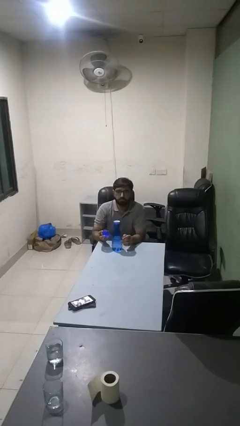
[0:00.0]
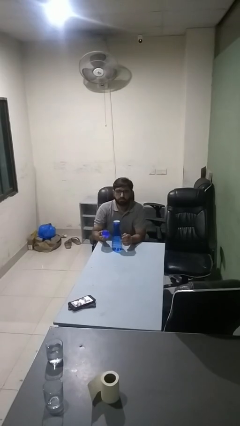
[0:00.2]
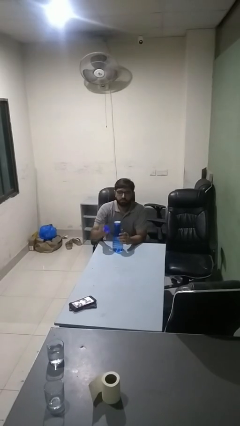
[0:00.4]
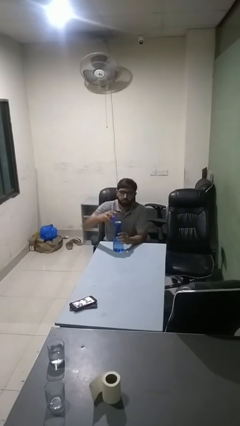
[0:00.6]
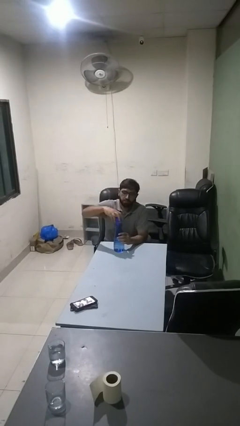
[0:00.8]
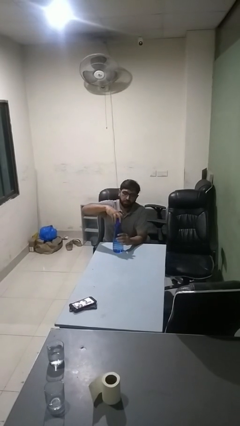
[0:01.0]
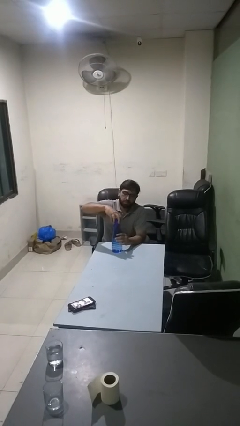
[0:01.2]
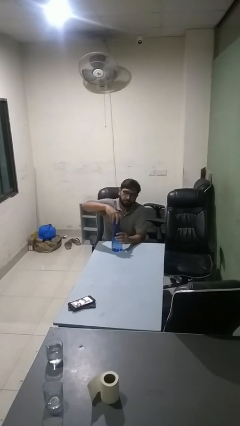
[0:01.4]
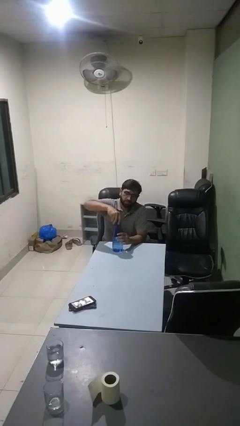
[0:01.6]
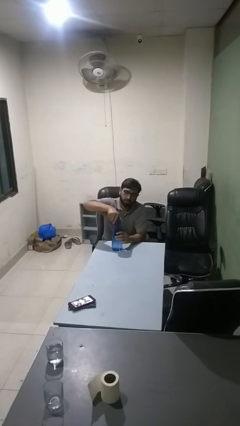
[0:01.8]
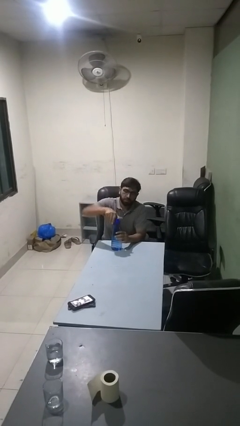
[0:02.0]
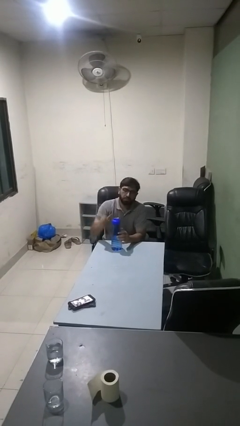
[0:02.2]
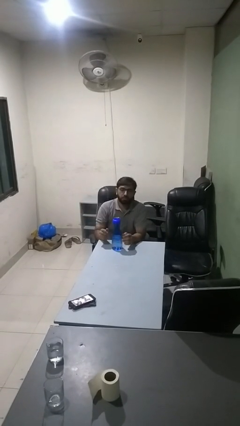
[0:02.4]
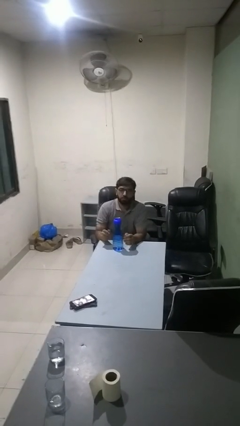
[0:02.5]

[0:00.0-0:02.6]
person screws lid to bottle

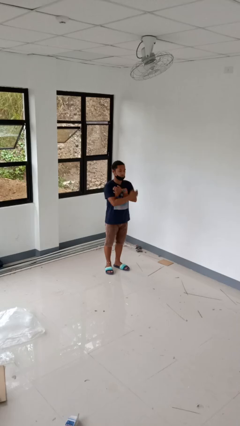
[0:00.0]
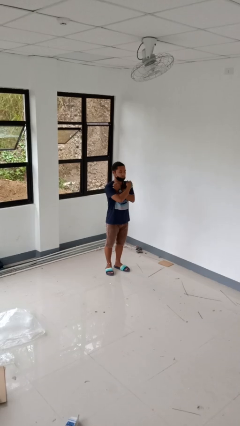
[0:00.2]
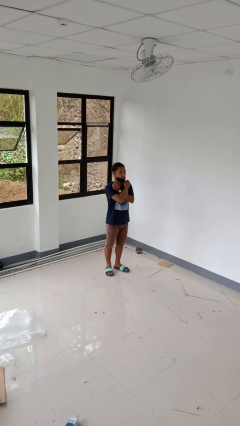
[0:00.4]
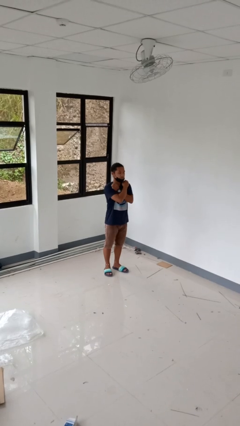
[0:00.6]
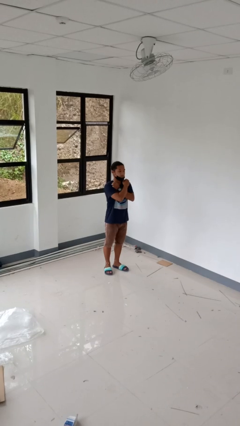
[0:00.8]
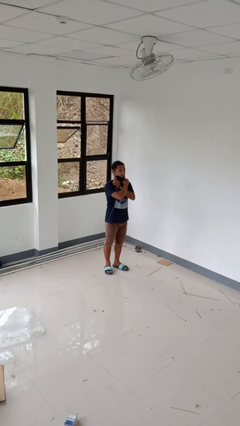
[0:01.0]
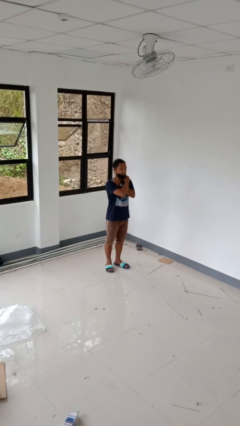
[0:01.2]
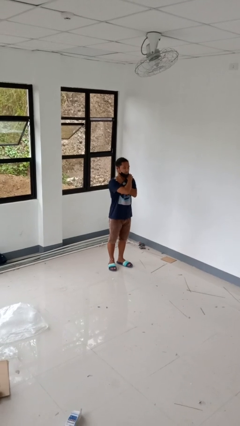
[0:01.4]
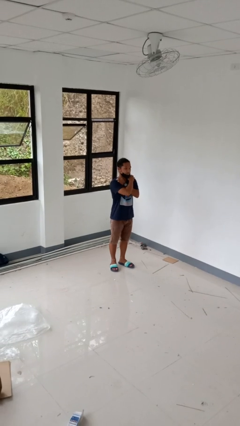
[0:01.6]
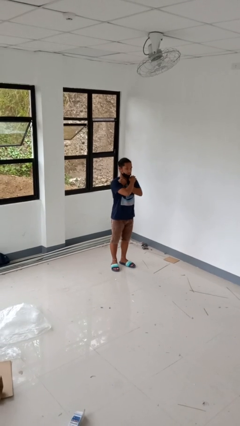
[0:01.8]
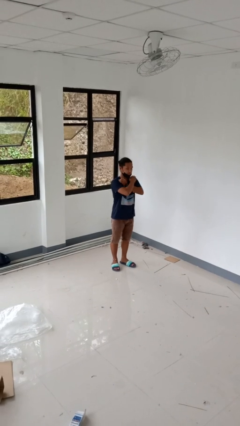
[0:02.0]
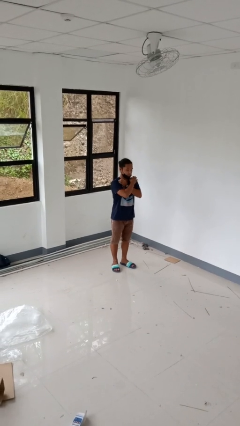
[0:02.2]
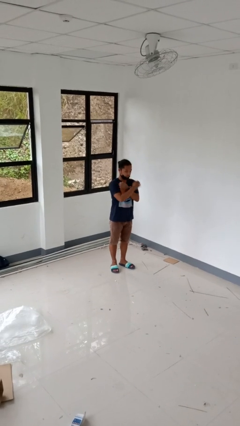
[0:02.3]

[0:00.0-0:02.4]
person gestures arms x

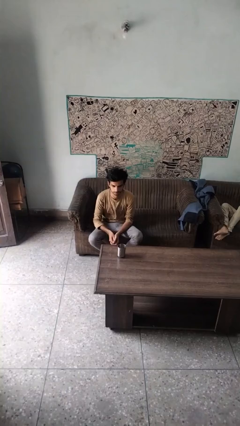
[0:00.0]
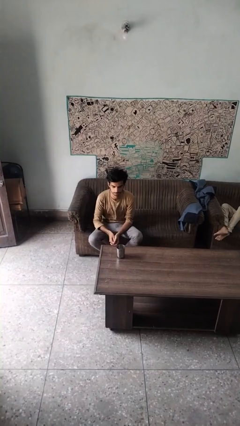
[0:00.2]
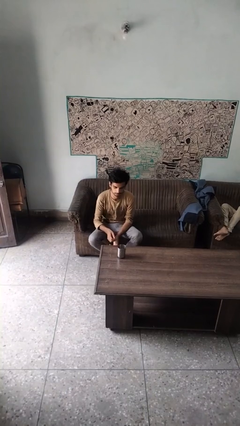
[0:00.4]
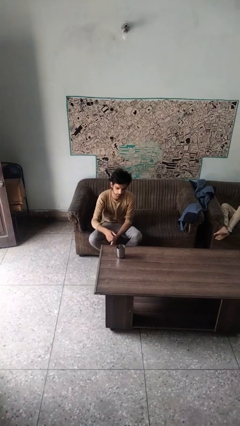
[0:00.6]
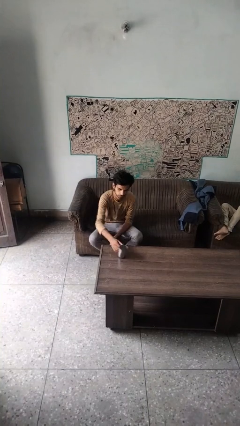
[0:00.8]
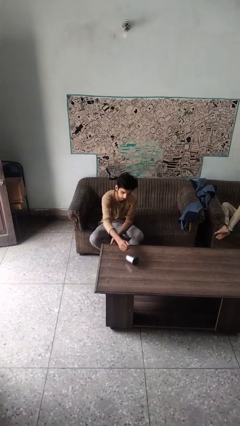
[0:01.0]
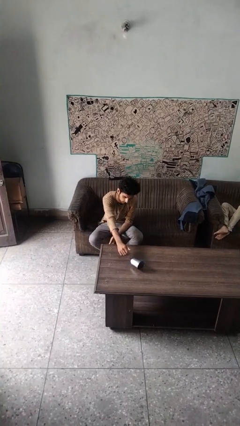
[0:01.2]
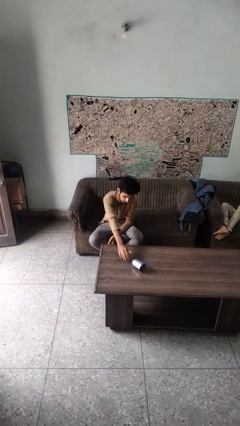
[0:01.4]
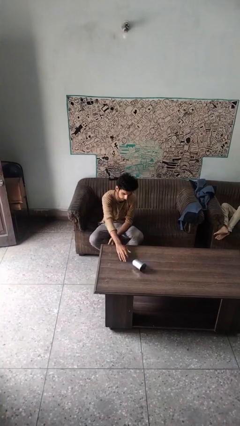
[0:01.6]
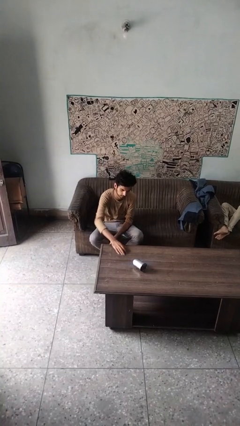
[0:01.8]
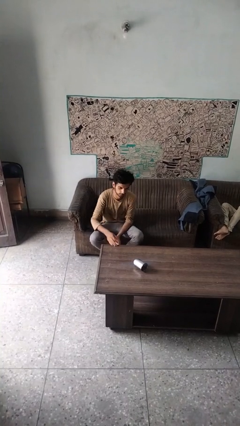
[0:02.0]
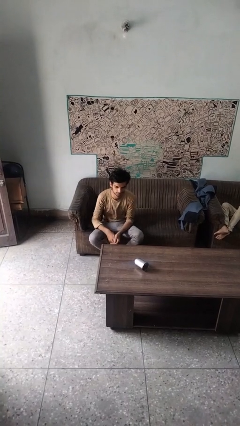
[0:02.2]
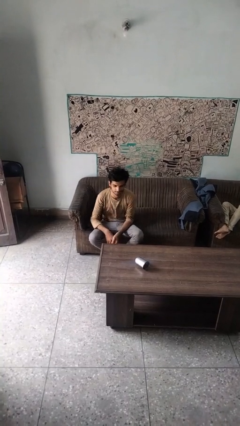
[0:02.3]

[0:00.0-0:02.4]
person knocks over glass

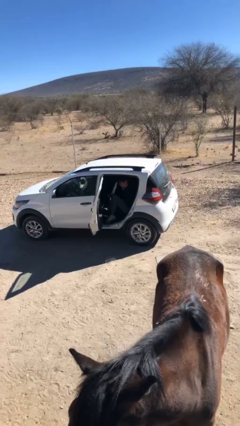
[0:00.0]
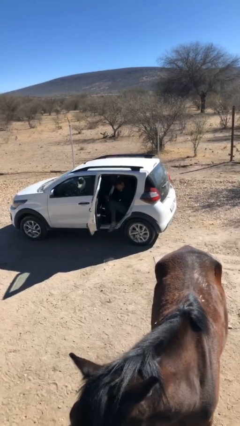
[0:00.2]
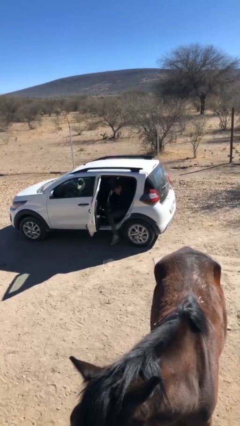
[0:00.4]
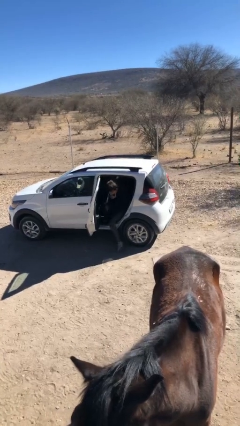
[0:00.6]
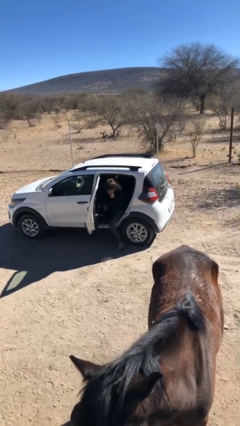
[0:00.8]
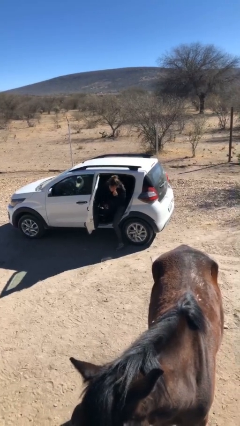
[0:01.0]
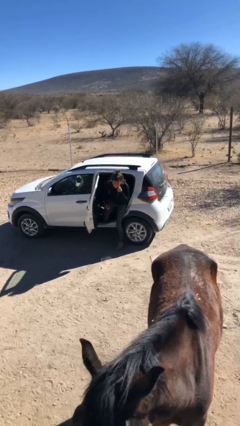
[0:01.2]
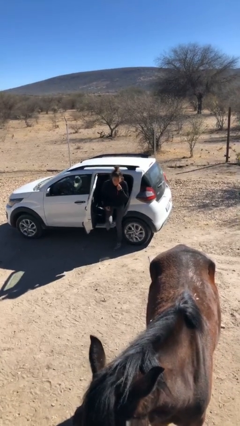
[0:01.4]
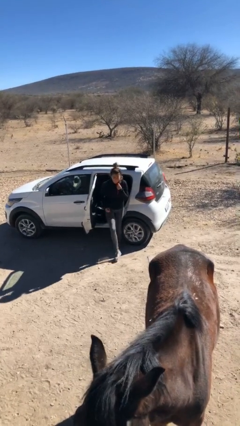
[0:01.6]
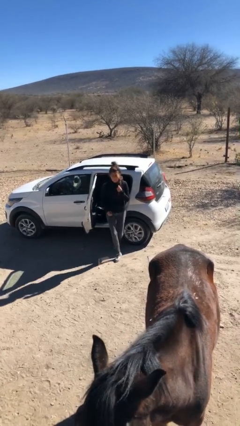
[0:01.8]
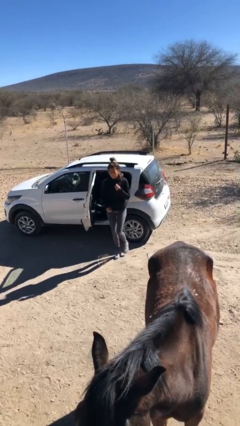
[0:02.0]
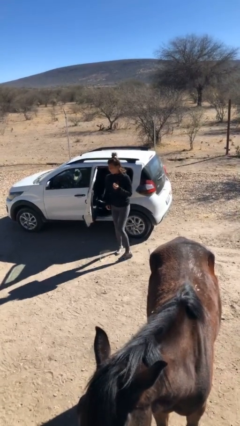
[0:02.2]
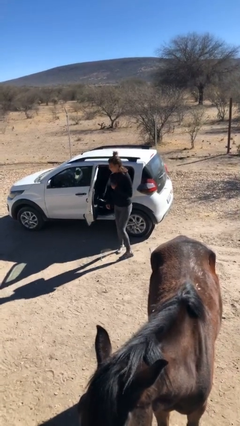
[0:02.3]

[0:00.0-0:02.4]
person exits car

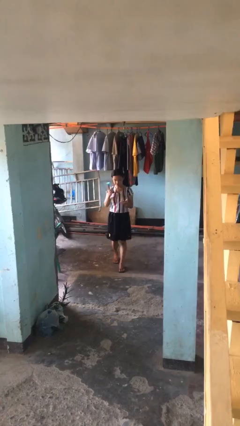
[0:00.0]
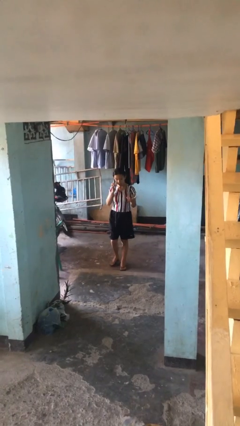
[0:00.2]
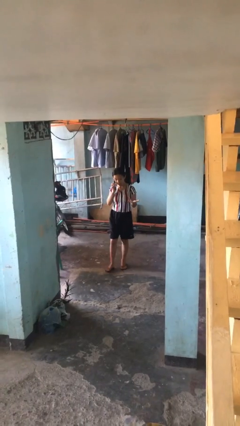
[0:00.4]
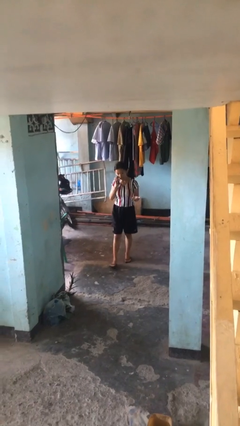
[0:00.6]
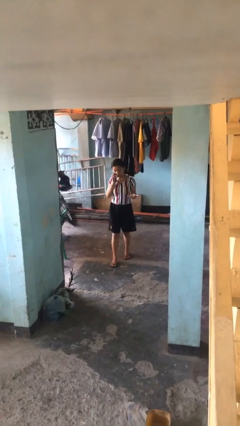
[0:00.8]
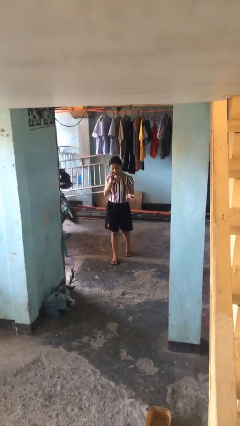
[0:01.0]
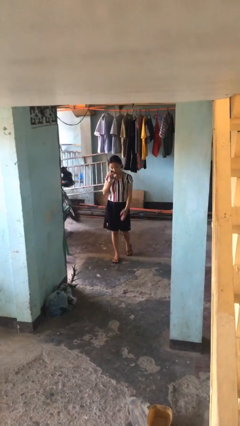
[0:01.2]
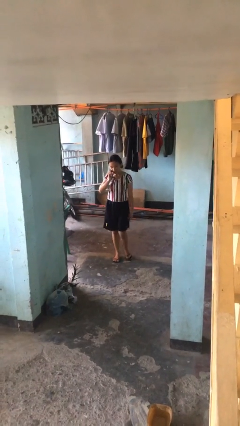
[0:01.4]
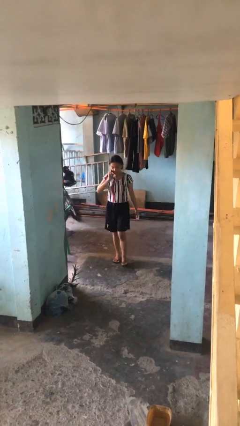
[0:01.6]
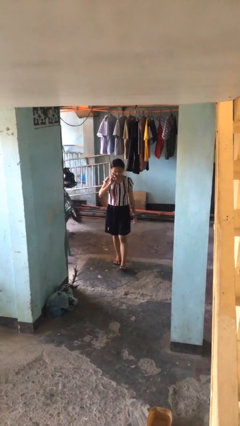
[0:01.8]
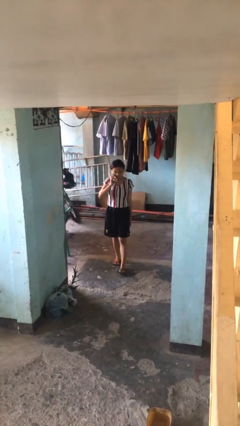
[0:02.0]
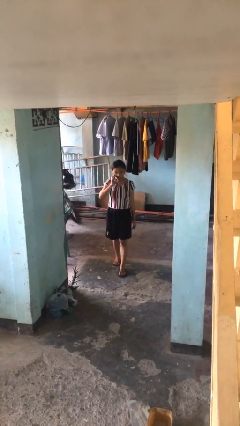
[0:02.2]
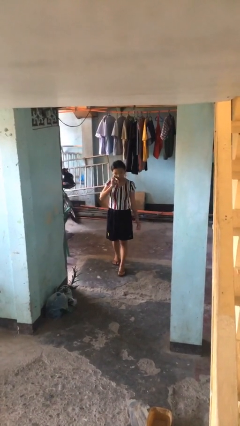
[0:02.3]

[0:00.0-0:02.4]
person talks on phone

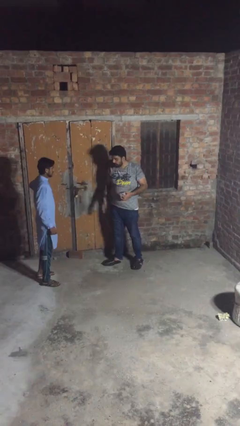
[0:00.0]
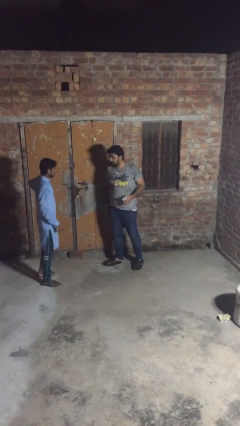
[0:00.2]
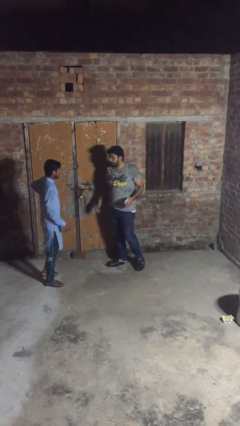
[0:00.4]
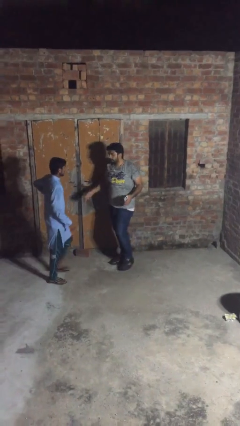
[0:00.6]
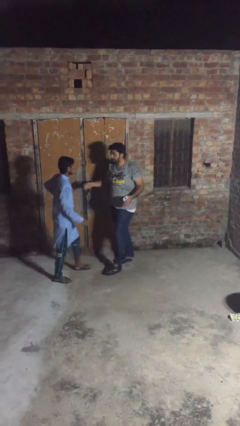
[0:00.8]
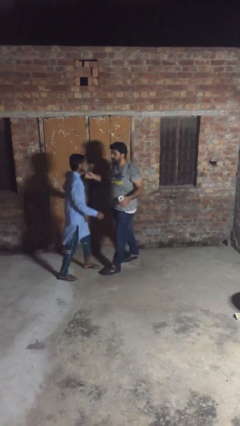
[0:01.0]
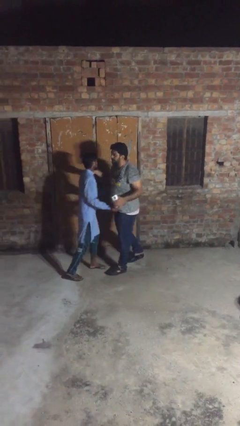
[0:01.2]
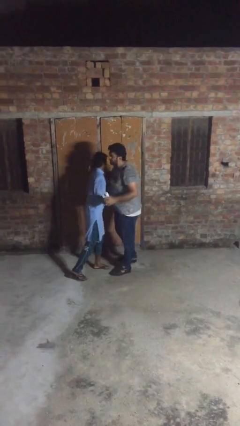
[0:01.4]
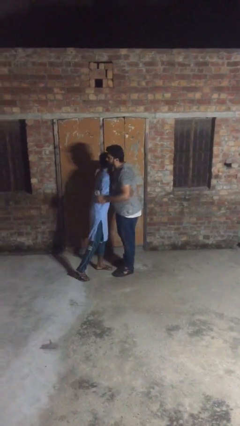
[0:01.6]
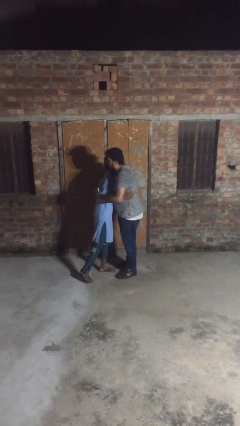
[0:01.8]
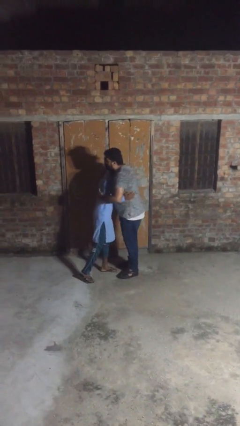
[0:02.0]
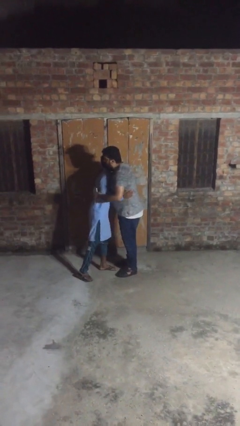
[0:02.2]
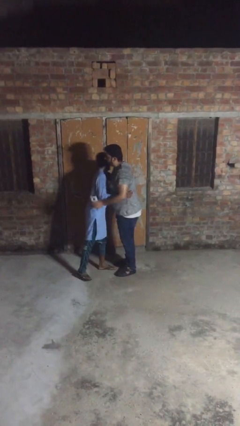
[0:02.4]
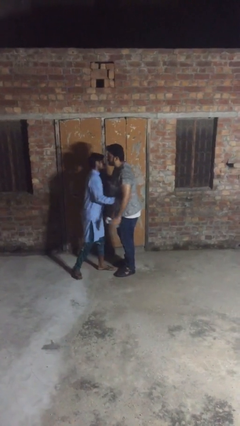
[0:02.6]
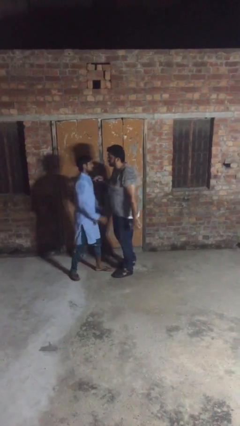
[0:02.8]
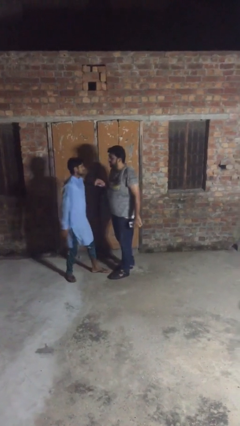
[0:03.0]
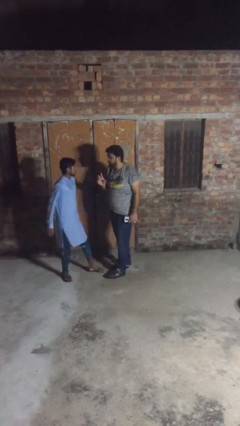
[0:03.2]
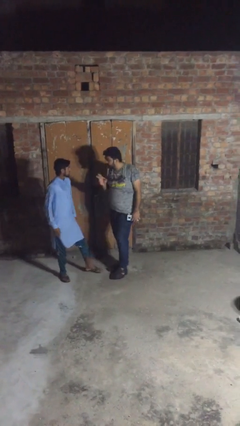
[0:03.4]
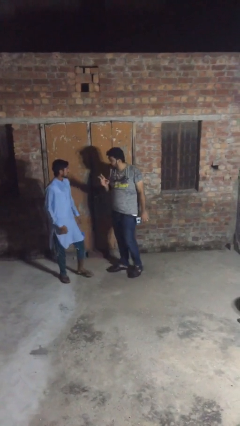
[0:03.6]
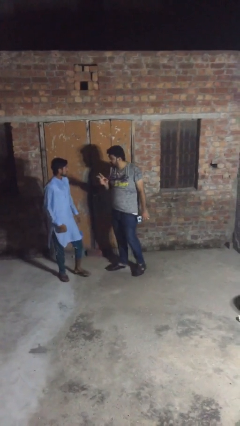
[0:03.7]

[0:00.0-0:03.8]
person embraces person

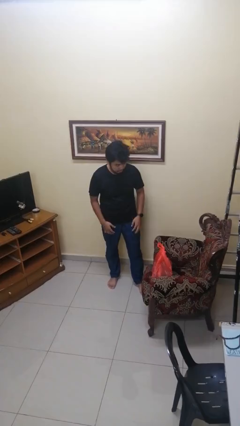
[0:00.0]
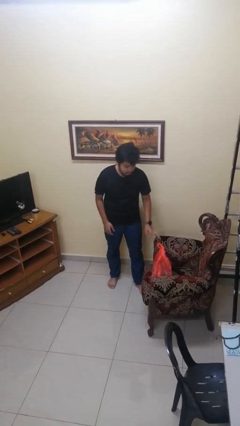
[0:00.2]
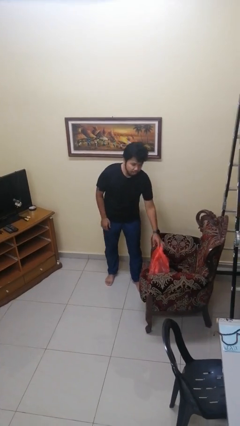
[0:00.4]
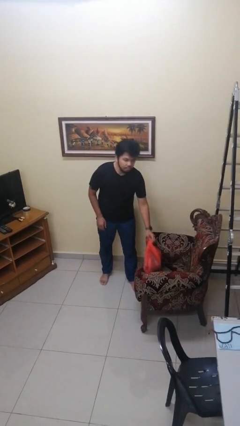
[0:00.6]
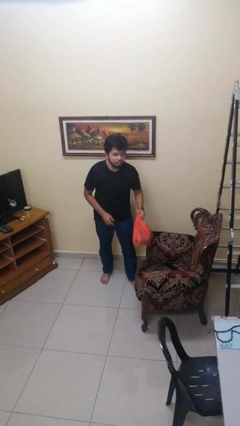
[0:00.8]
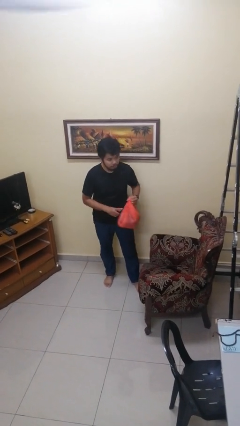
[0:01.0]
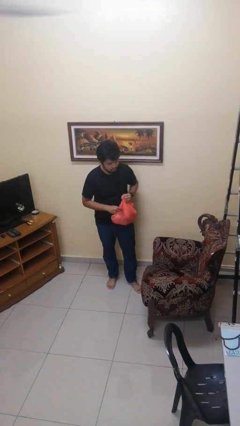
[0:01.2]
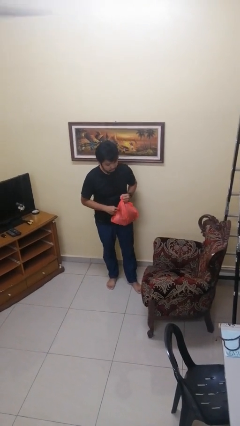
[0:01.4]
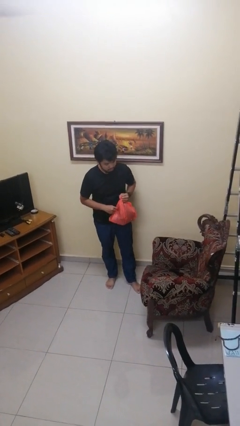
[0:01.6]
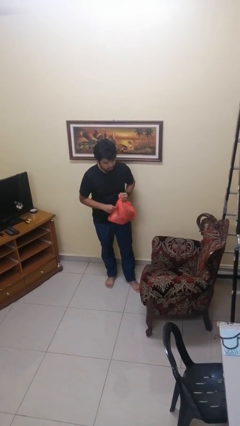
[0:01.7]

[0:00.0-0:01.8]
person picks up object from couch
